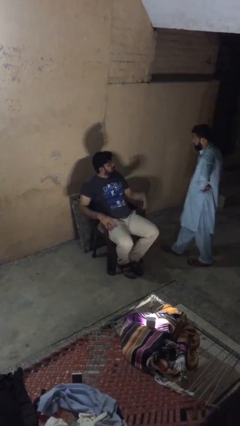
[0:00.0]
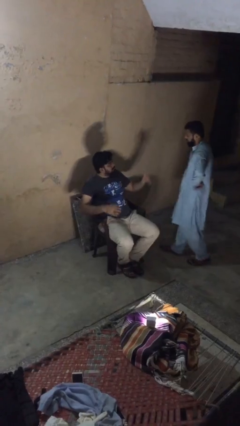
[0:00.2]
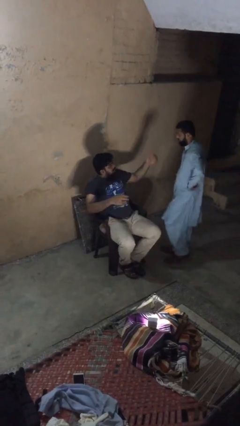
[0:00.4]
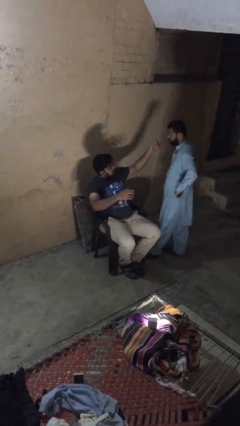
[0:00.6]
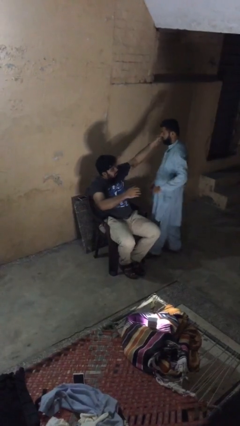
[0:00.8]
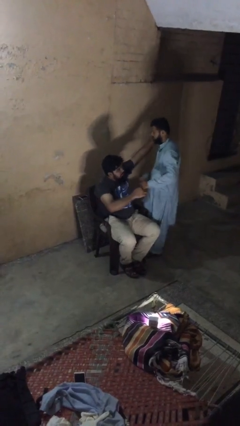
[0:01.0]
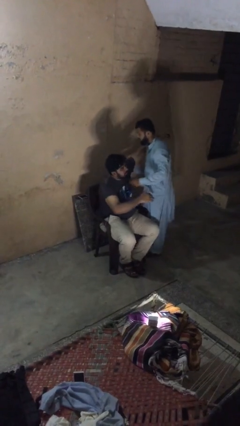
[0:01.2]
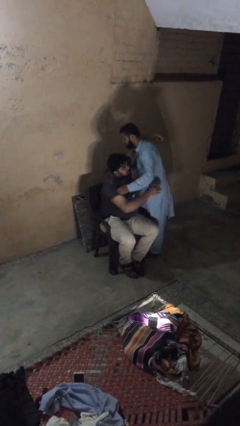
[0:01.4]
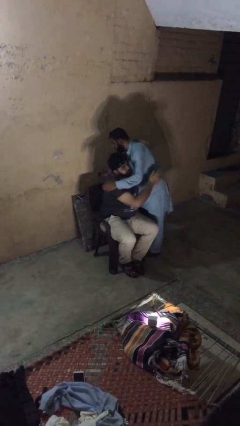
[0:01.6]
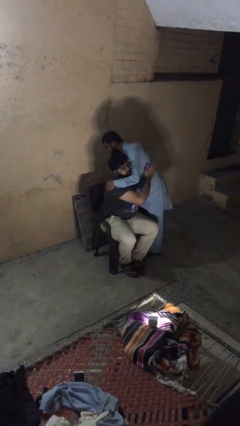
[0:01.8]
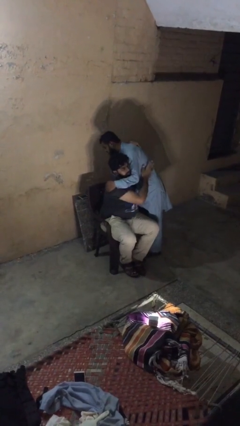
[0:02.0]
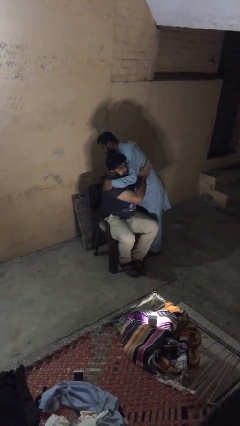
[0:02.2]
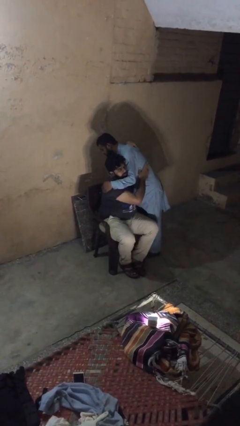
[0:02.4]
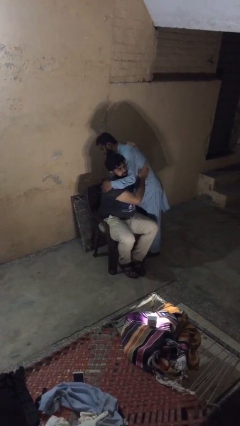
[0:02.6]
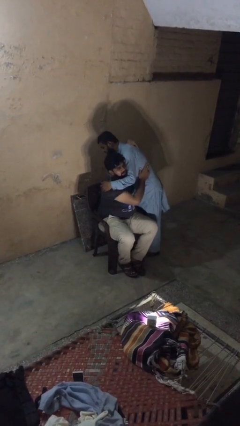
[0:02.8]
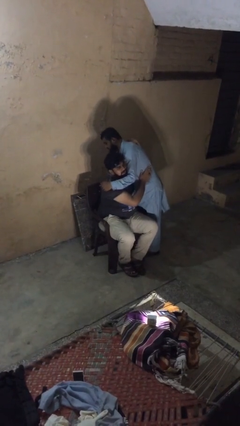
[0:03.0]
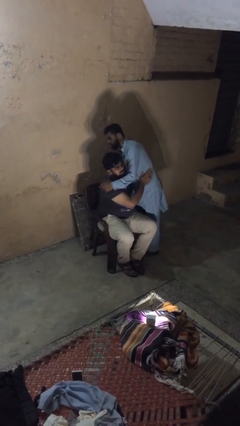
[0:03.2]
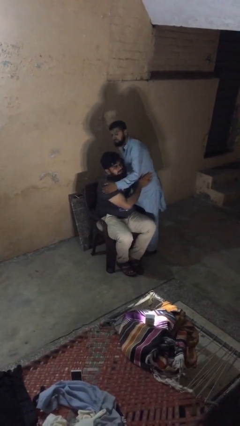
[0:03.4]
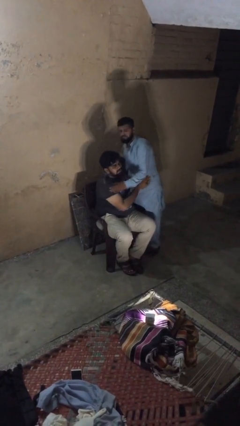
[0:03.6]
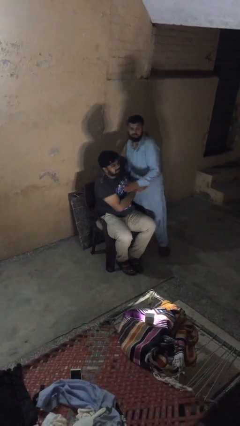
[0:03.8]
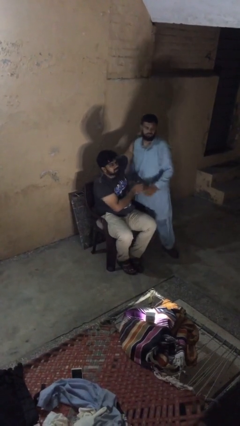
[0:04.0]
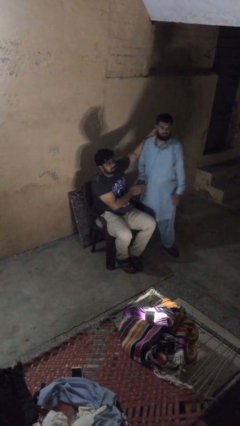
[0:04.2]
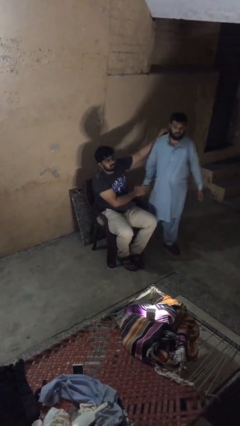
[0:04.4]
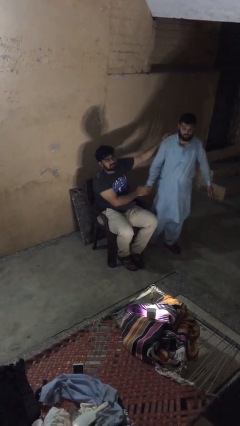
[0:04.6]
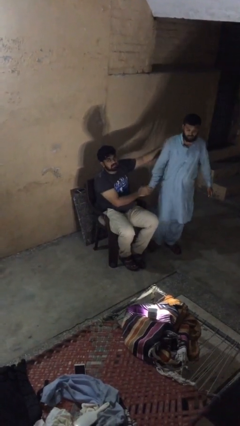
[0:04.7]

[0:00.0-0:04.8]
person embraces person

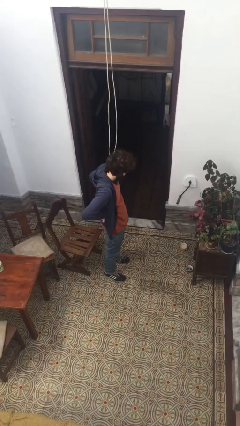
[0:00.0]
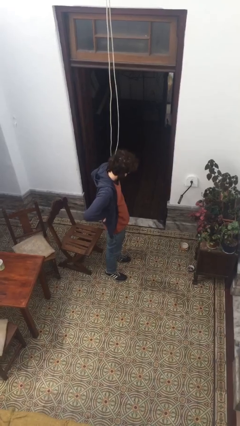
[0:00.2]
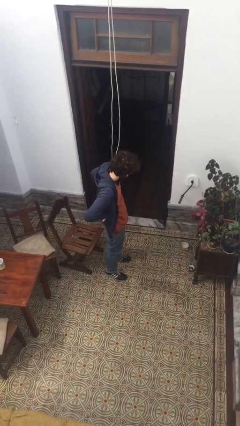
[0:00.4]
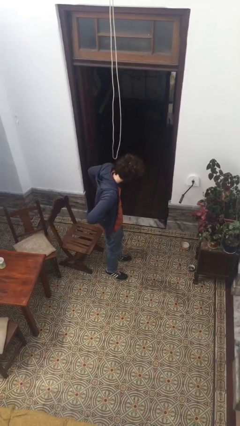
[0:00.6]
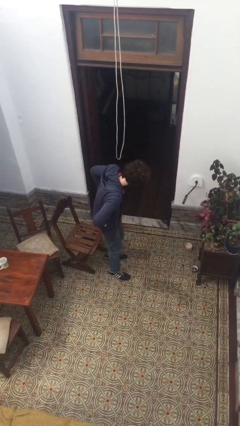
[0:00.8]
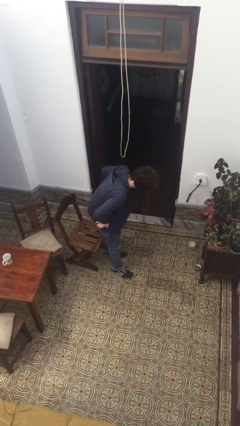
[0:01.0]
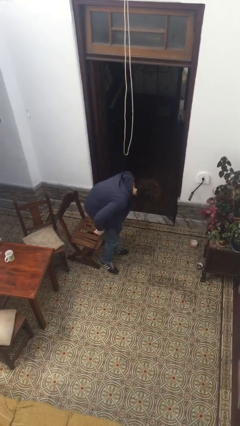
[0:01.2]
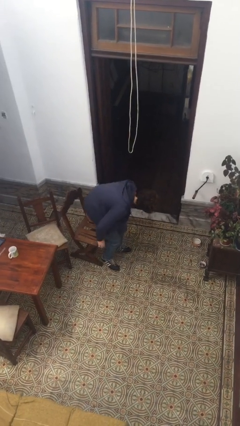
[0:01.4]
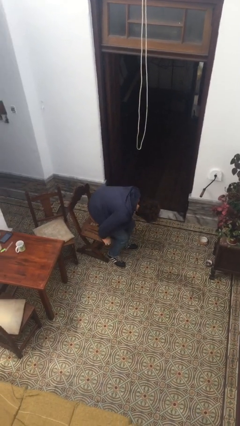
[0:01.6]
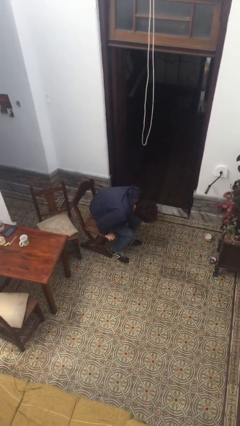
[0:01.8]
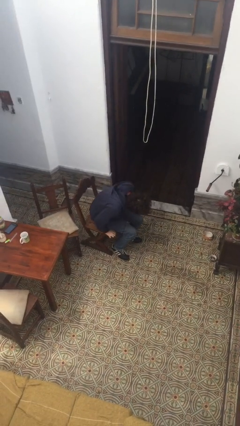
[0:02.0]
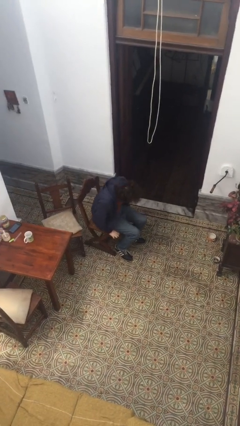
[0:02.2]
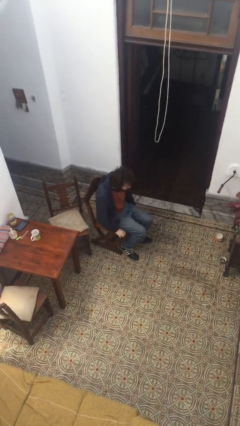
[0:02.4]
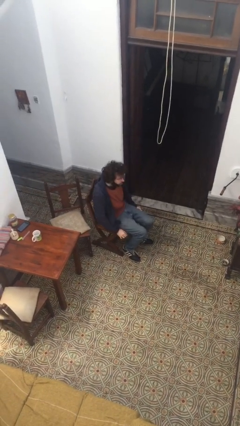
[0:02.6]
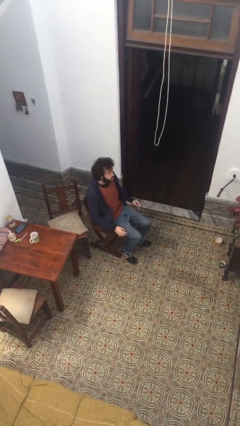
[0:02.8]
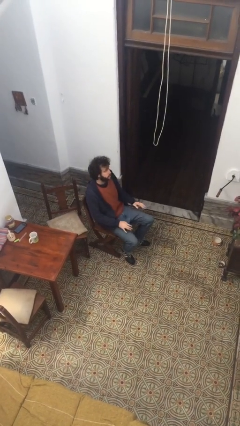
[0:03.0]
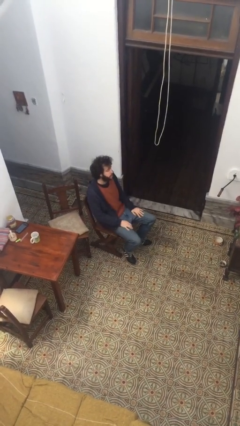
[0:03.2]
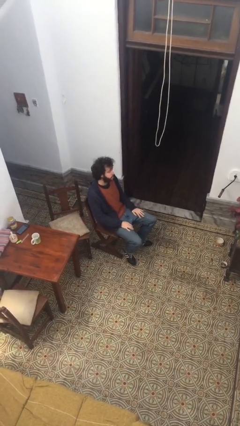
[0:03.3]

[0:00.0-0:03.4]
person sits down

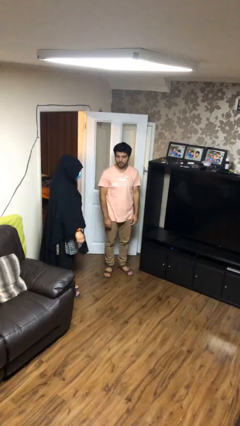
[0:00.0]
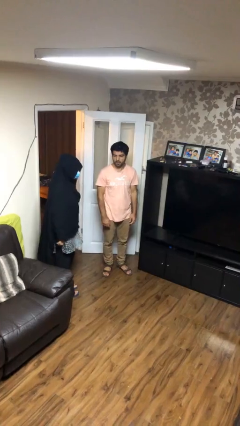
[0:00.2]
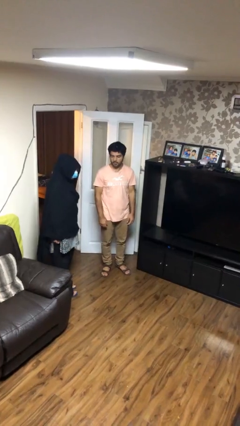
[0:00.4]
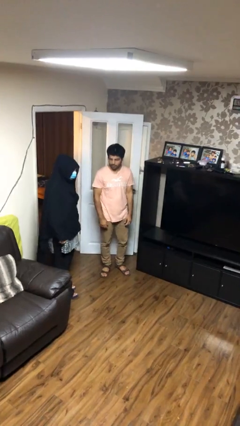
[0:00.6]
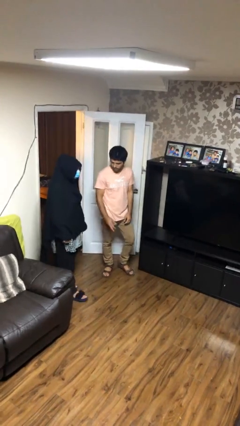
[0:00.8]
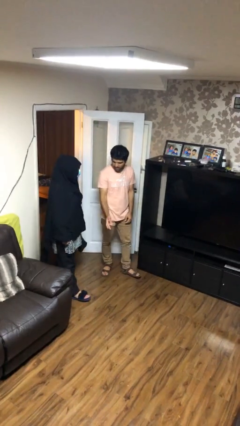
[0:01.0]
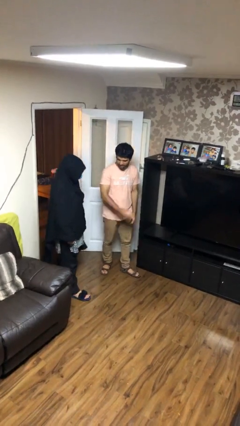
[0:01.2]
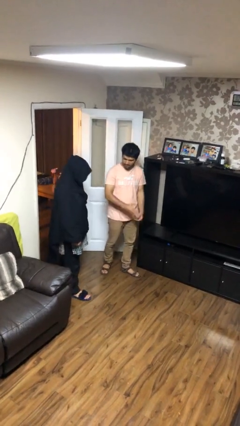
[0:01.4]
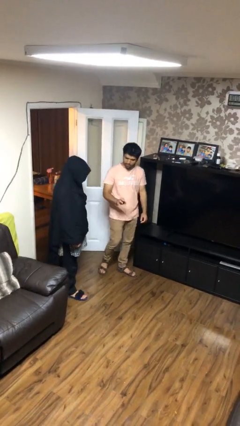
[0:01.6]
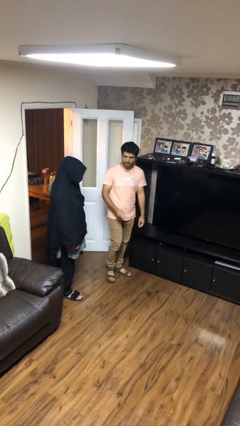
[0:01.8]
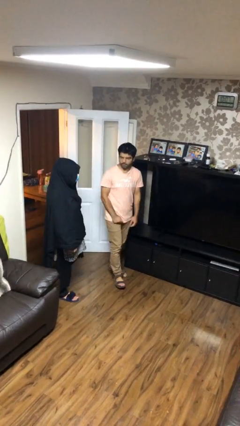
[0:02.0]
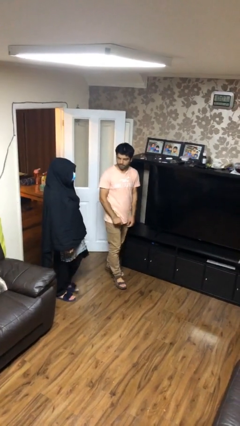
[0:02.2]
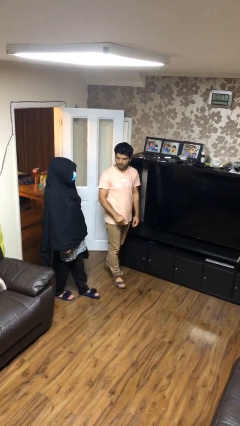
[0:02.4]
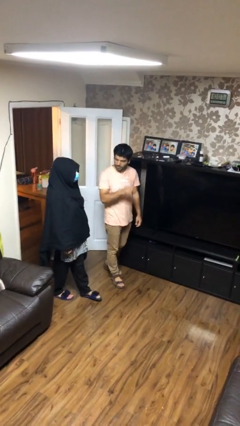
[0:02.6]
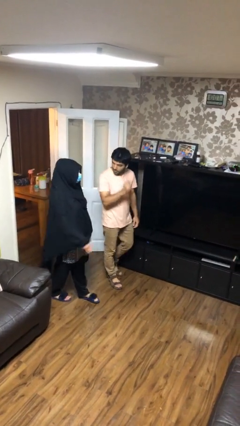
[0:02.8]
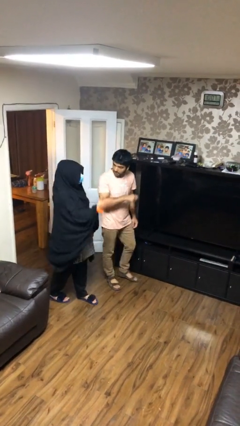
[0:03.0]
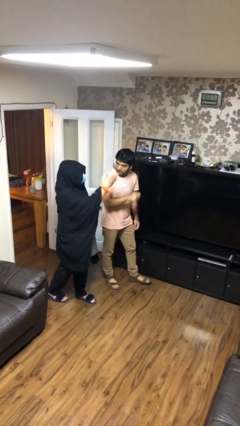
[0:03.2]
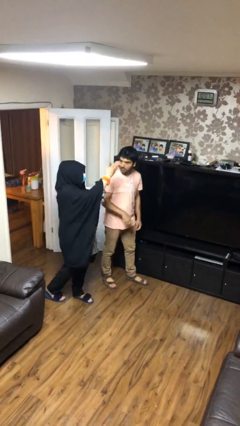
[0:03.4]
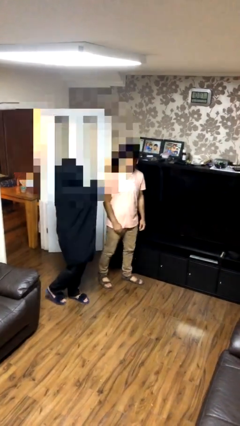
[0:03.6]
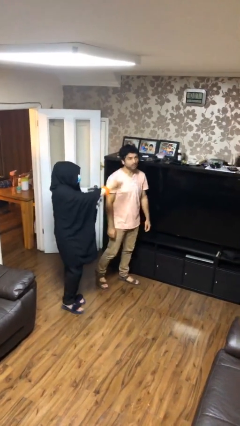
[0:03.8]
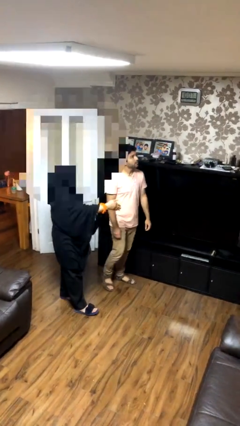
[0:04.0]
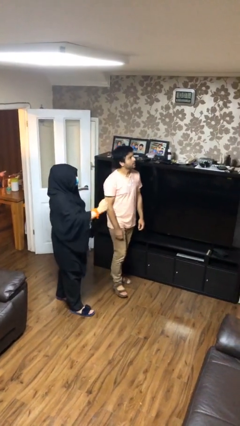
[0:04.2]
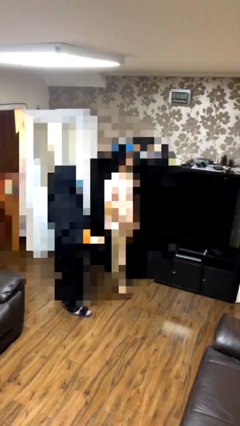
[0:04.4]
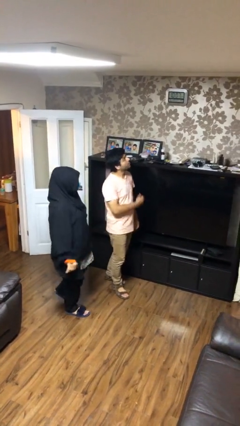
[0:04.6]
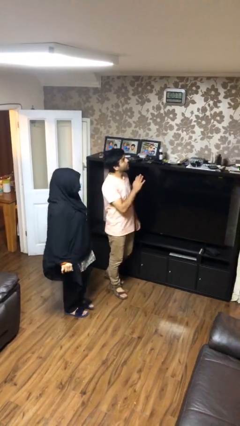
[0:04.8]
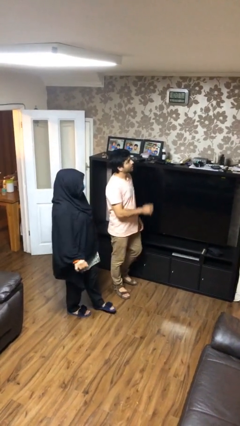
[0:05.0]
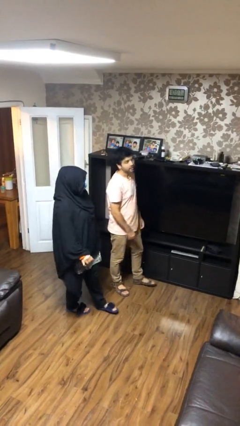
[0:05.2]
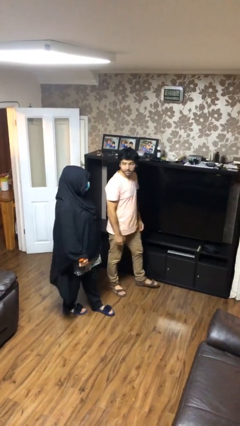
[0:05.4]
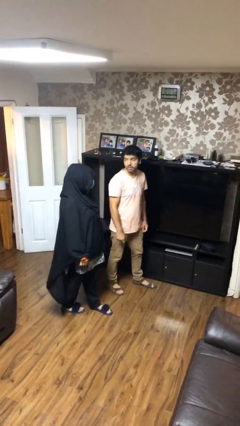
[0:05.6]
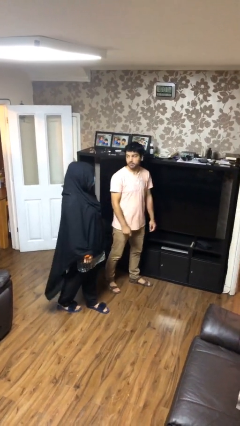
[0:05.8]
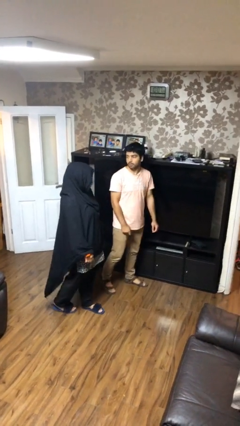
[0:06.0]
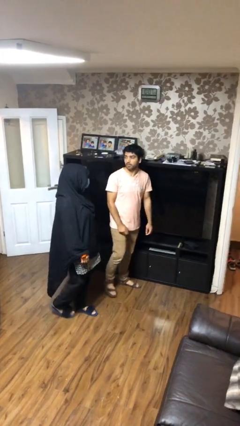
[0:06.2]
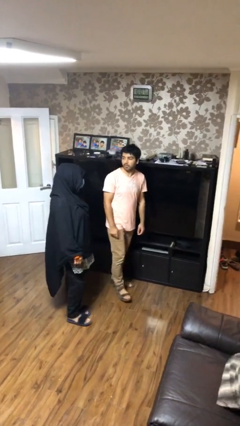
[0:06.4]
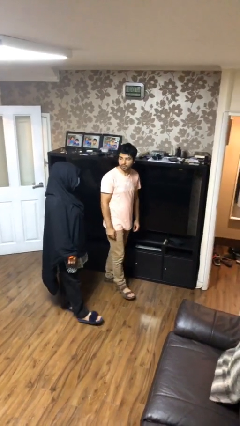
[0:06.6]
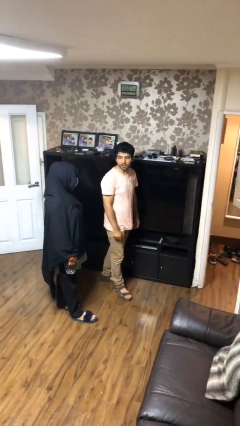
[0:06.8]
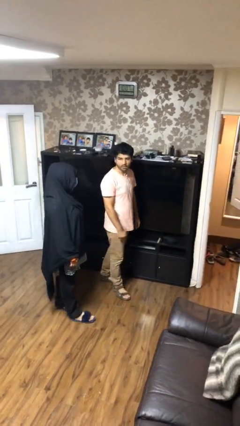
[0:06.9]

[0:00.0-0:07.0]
person talks to person

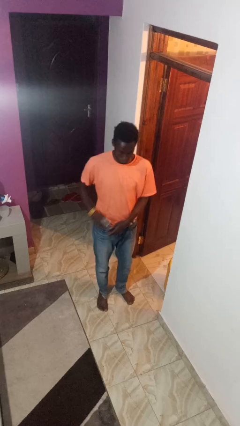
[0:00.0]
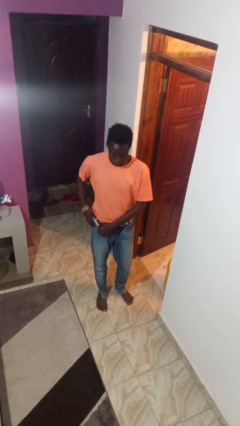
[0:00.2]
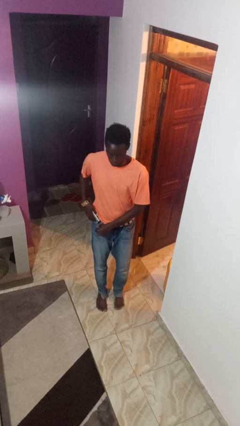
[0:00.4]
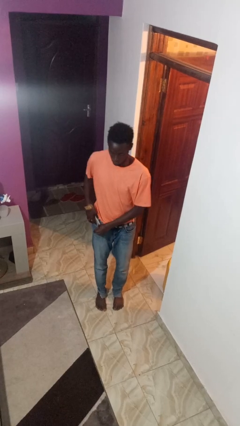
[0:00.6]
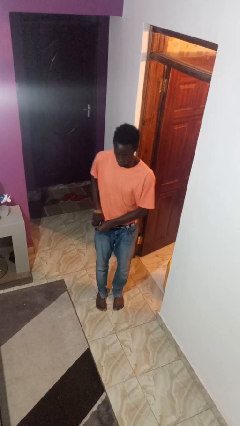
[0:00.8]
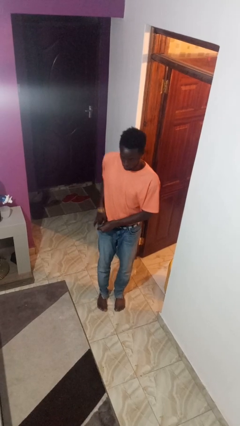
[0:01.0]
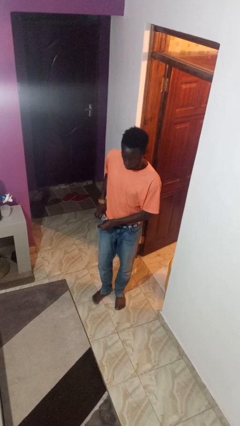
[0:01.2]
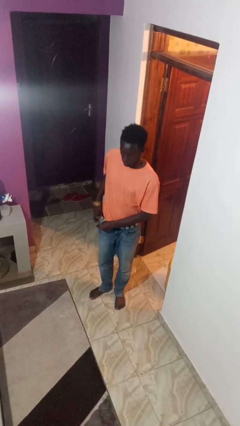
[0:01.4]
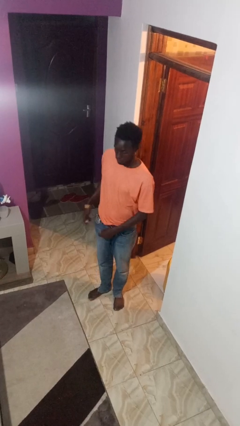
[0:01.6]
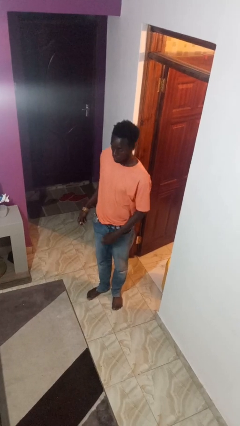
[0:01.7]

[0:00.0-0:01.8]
person puts phone into pocket

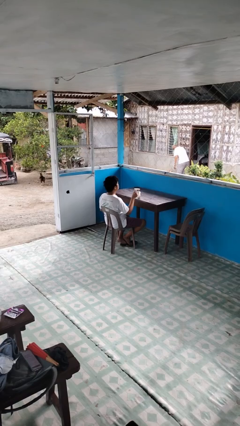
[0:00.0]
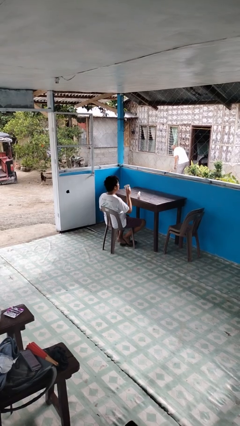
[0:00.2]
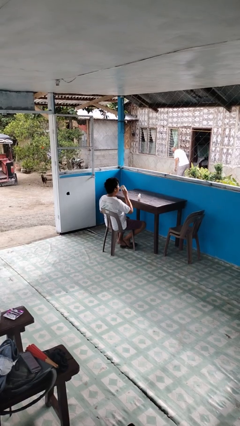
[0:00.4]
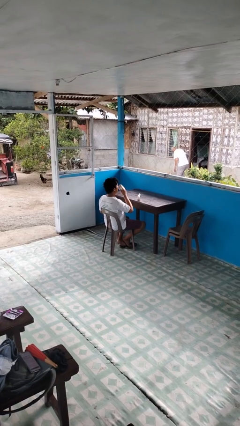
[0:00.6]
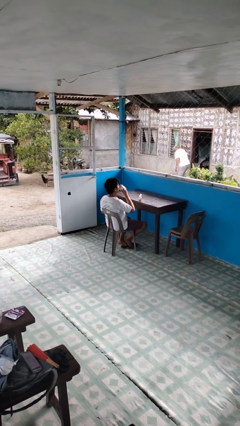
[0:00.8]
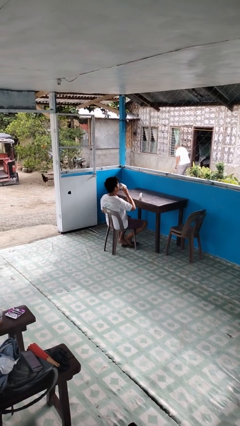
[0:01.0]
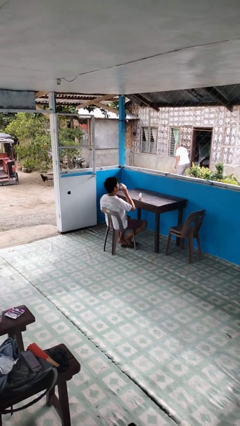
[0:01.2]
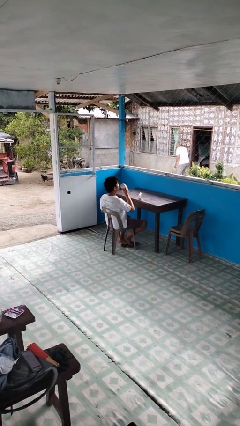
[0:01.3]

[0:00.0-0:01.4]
person drinks from cup
